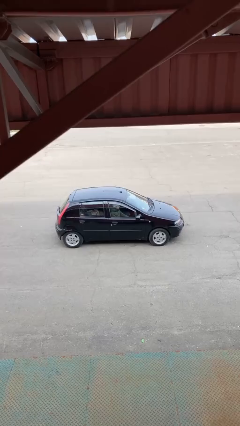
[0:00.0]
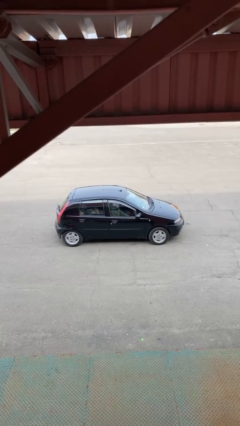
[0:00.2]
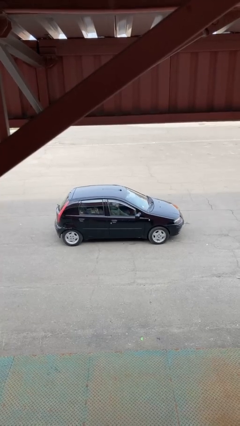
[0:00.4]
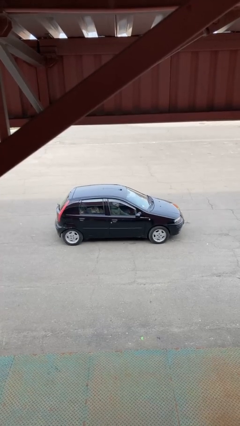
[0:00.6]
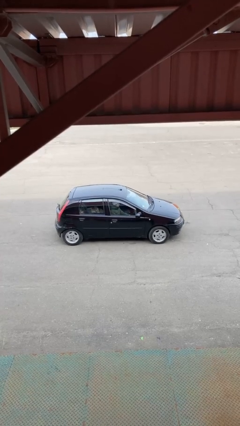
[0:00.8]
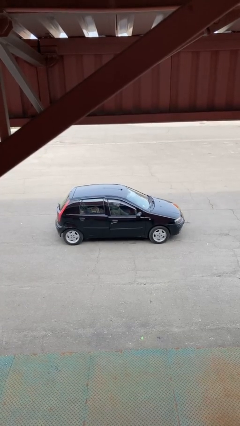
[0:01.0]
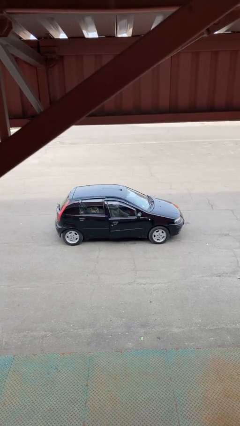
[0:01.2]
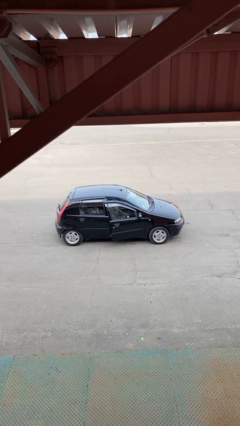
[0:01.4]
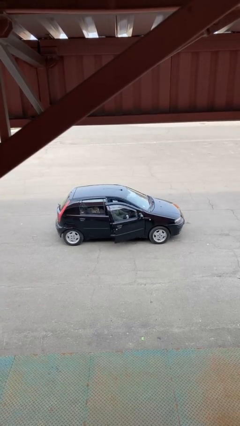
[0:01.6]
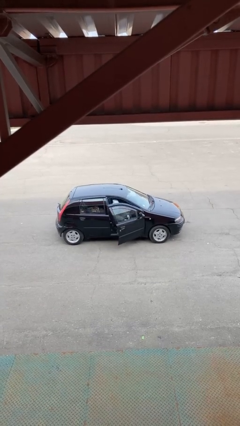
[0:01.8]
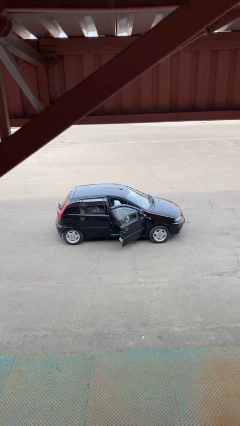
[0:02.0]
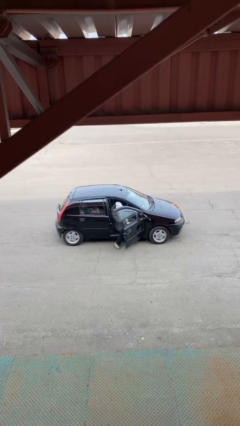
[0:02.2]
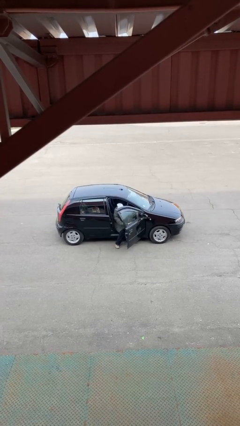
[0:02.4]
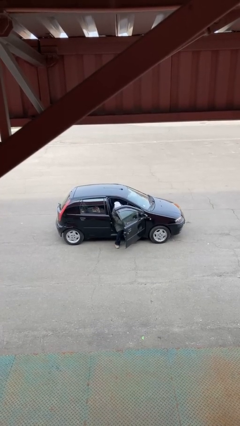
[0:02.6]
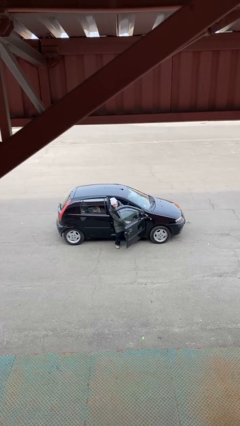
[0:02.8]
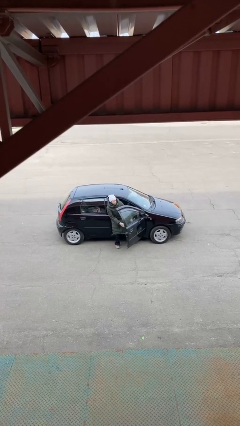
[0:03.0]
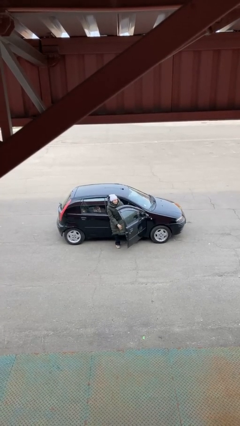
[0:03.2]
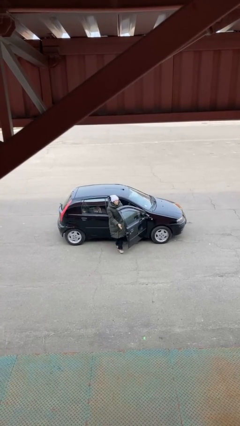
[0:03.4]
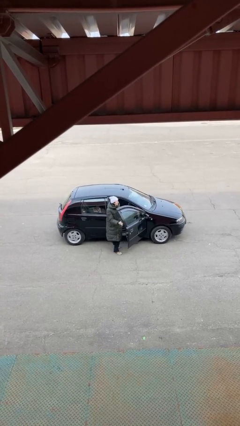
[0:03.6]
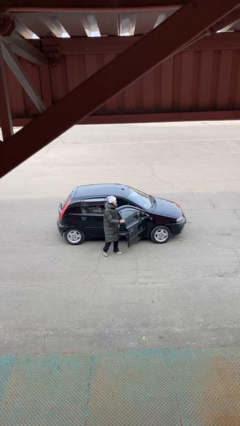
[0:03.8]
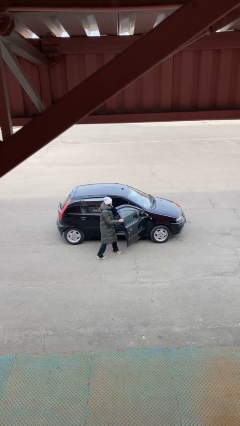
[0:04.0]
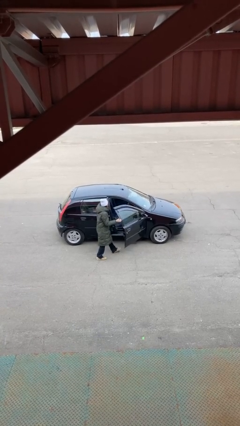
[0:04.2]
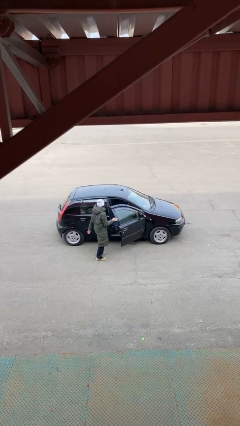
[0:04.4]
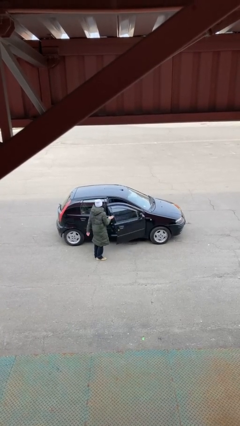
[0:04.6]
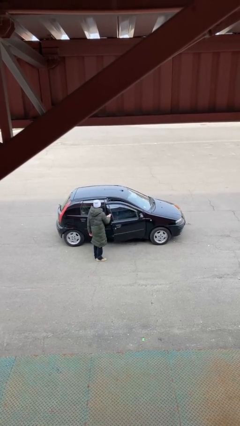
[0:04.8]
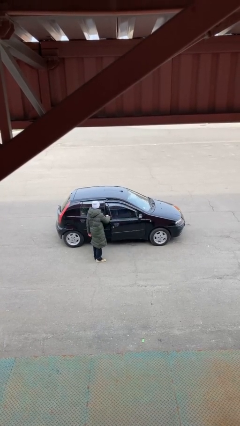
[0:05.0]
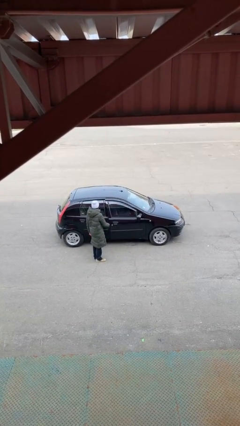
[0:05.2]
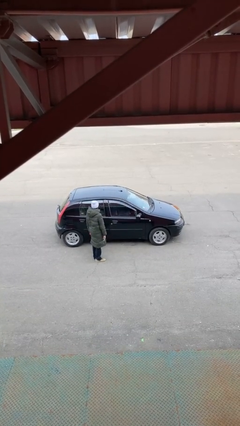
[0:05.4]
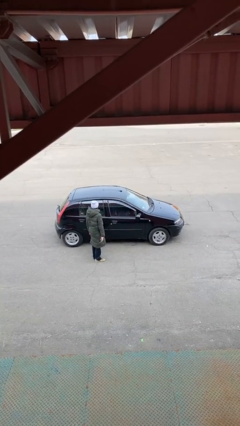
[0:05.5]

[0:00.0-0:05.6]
car drops off person

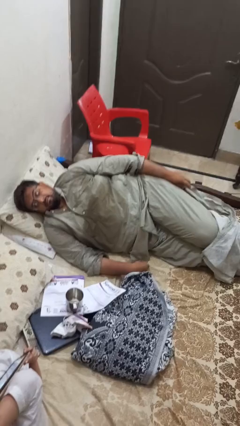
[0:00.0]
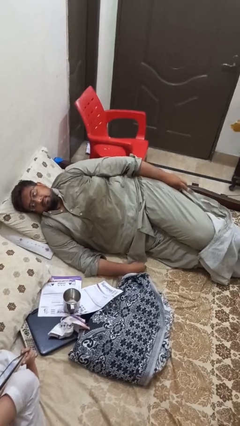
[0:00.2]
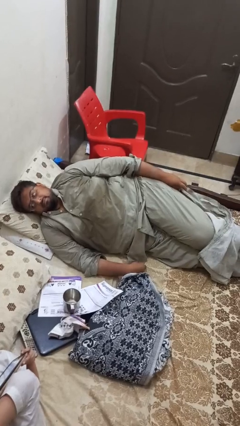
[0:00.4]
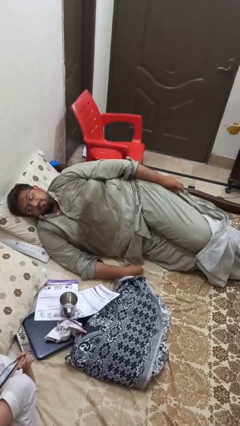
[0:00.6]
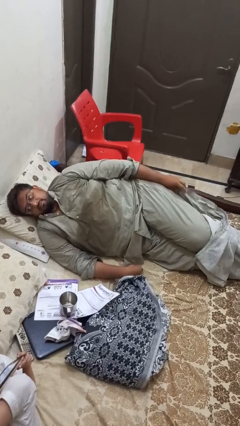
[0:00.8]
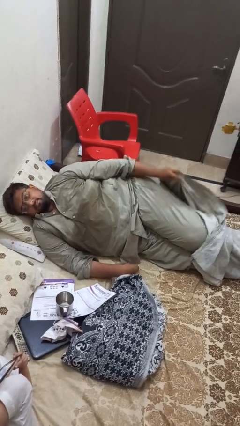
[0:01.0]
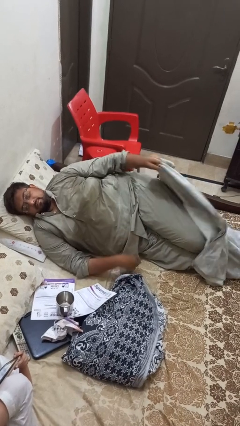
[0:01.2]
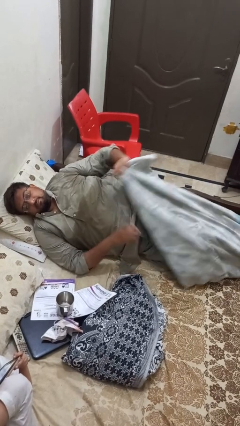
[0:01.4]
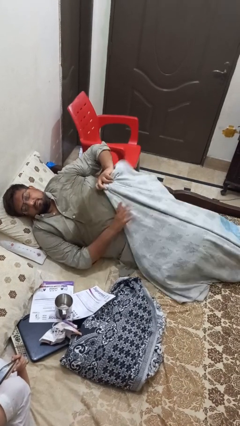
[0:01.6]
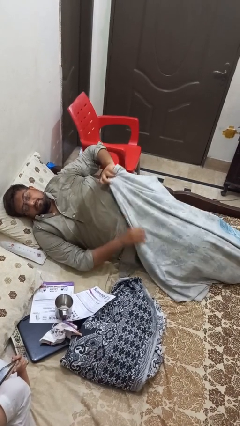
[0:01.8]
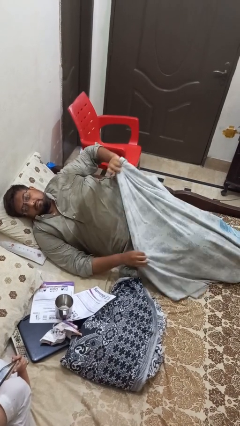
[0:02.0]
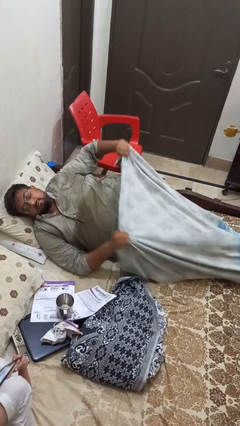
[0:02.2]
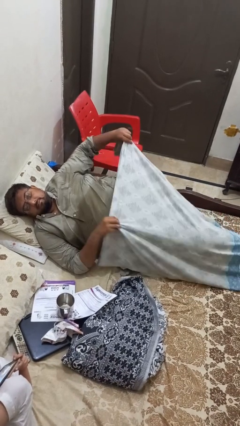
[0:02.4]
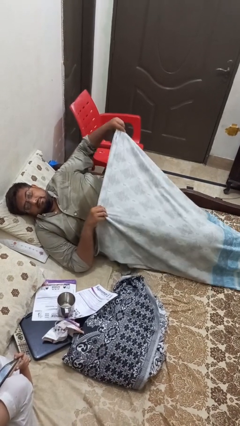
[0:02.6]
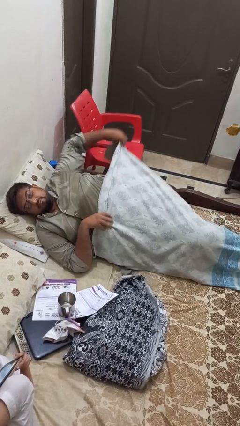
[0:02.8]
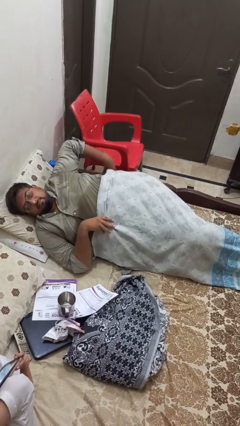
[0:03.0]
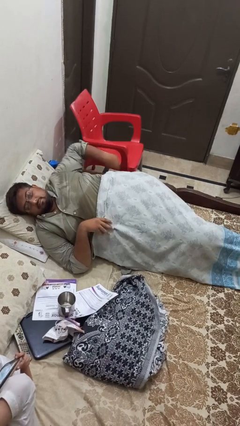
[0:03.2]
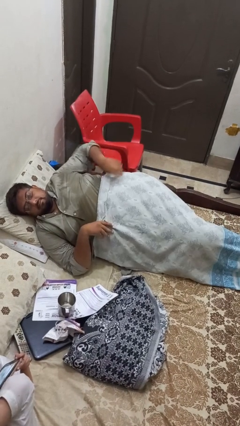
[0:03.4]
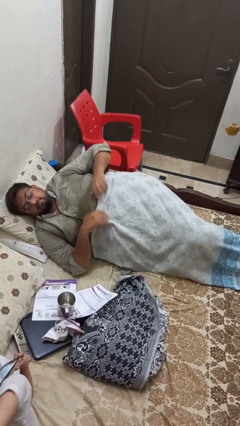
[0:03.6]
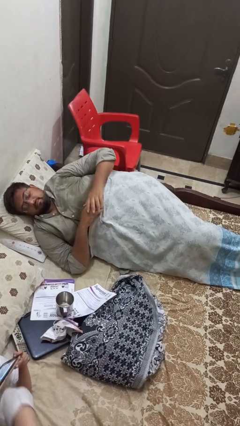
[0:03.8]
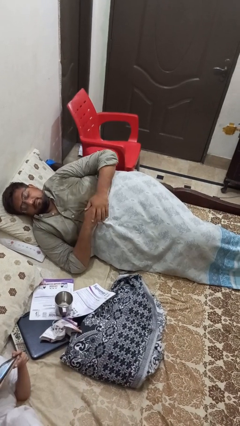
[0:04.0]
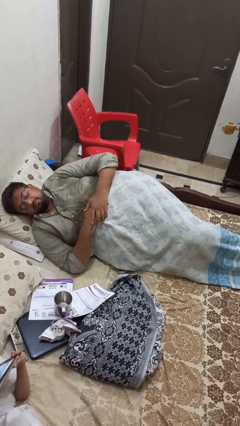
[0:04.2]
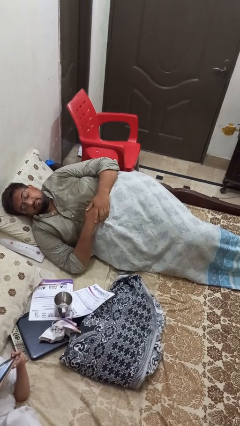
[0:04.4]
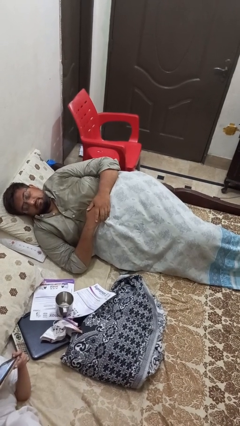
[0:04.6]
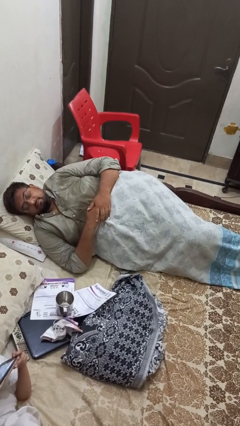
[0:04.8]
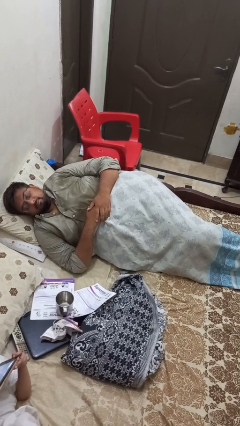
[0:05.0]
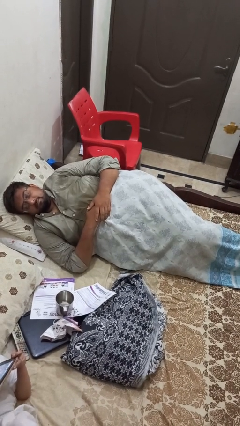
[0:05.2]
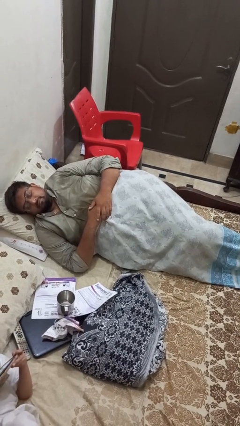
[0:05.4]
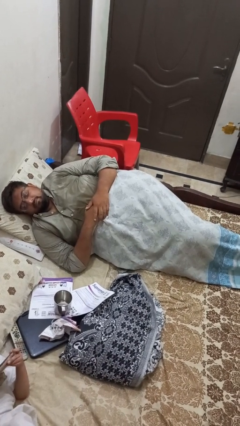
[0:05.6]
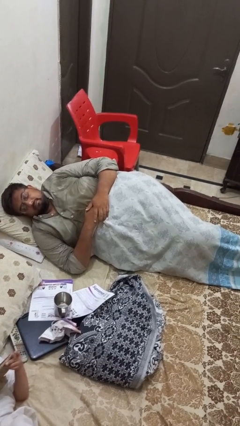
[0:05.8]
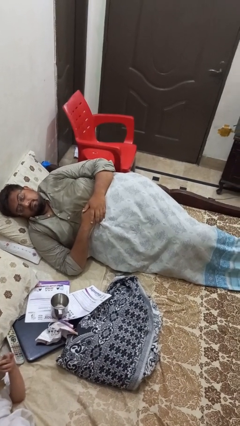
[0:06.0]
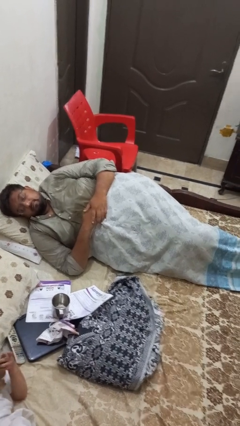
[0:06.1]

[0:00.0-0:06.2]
person covers with bedsheets

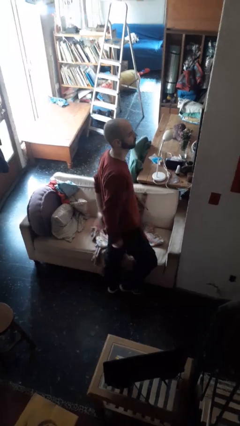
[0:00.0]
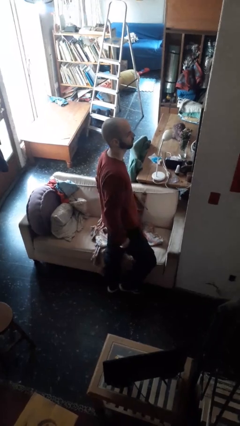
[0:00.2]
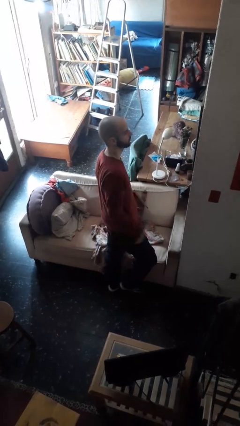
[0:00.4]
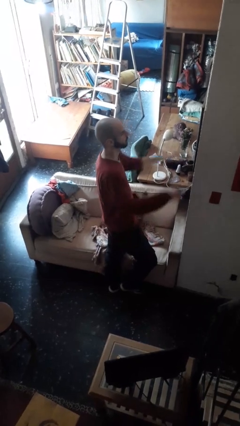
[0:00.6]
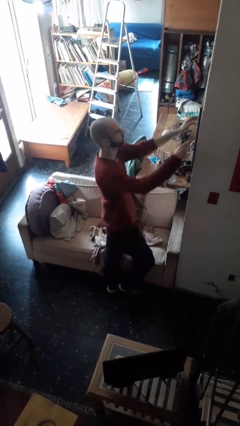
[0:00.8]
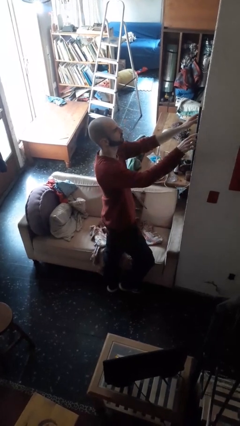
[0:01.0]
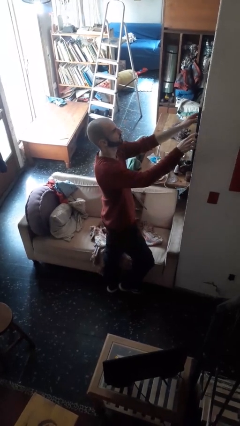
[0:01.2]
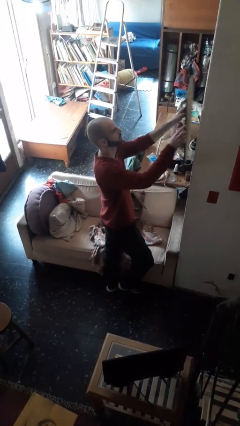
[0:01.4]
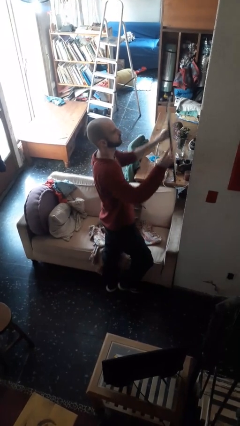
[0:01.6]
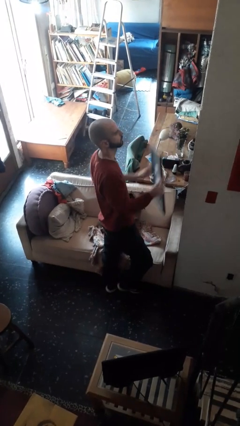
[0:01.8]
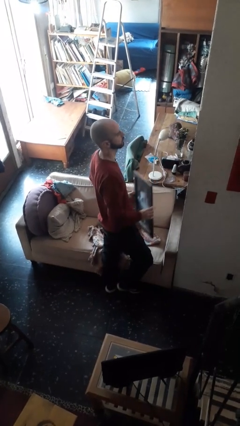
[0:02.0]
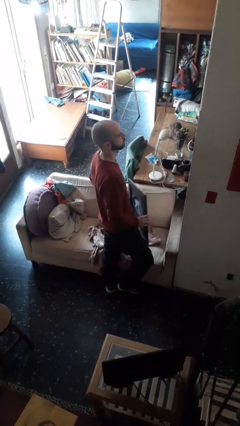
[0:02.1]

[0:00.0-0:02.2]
person takes down picture frame

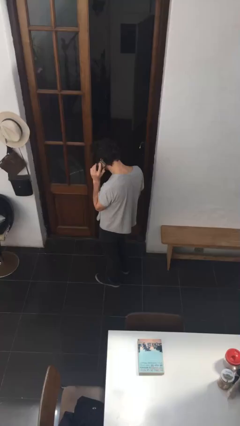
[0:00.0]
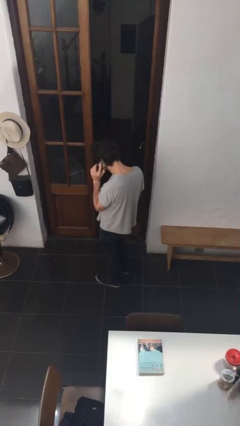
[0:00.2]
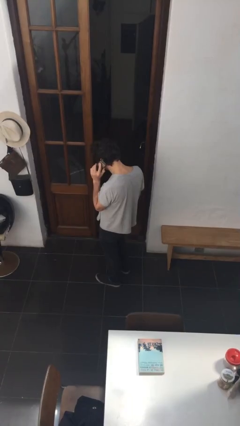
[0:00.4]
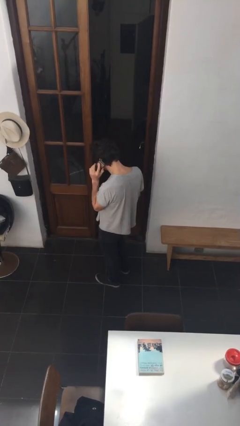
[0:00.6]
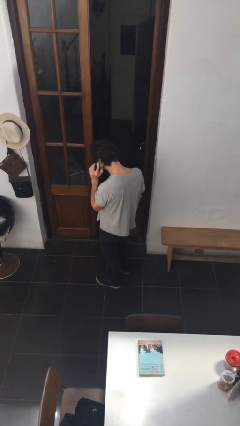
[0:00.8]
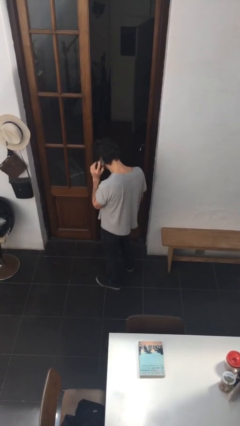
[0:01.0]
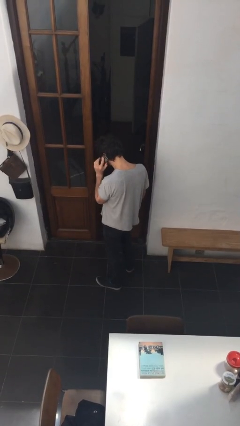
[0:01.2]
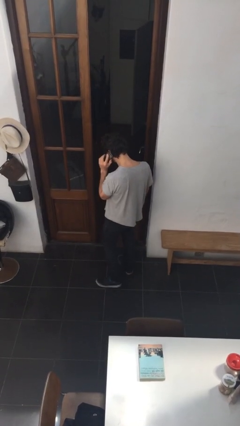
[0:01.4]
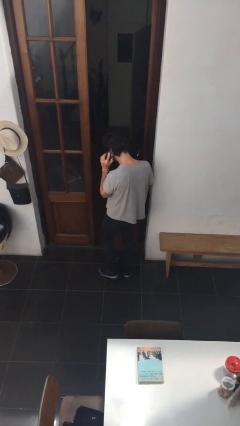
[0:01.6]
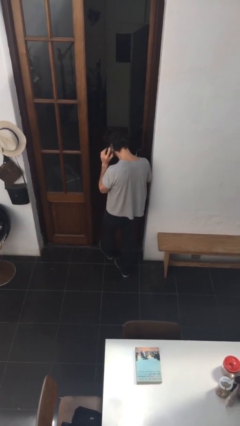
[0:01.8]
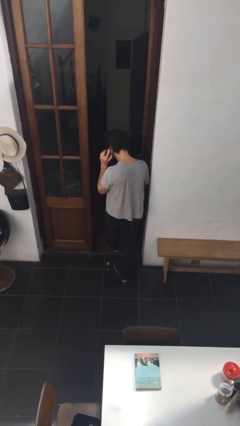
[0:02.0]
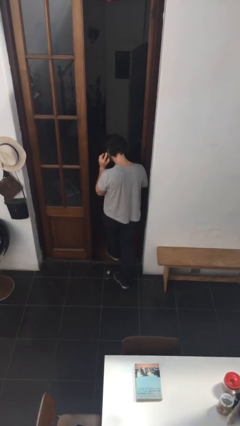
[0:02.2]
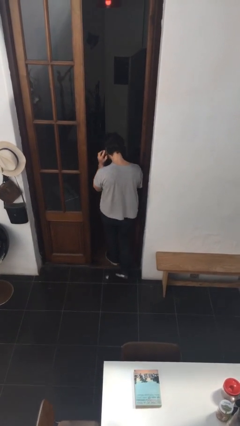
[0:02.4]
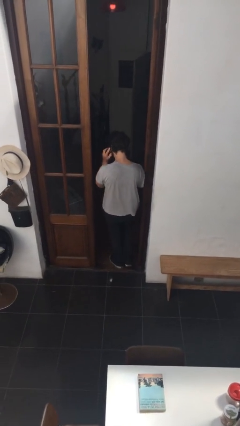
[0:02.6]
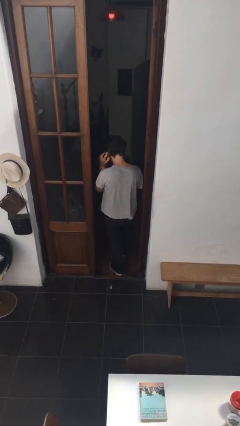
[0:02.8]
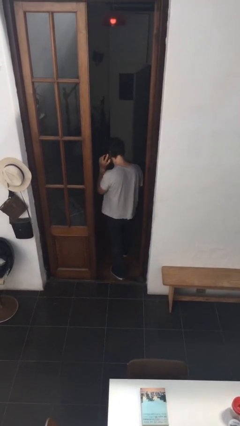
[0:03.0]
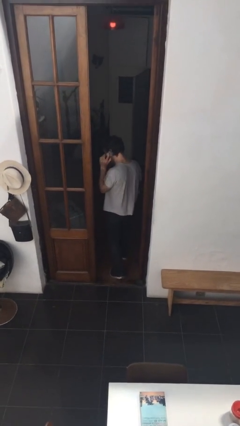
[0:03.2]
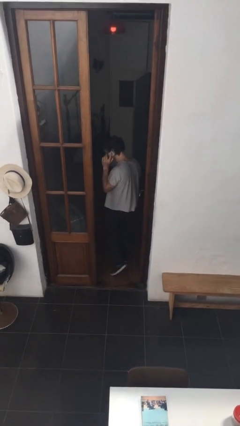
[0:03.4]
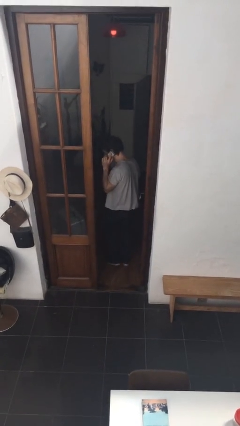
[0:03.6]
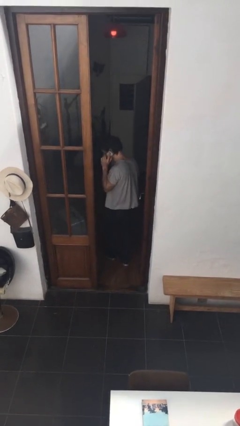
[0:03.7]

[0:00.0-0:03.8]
person exits scene through structure

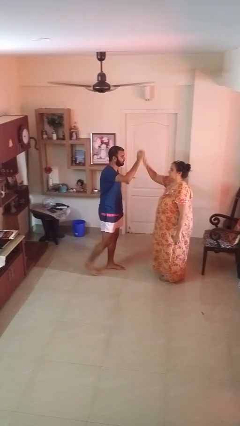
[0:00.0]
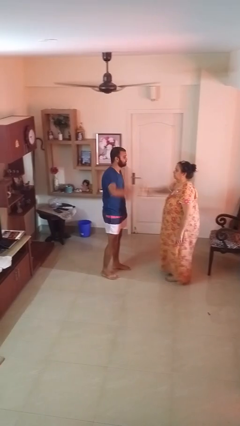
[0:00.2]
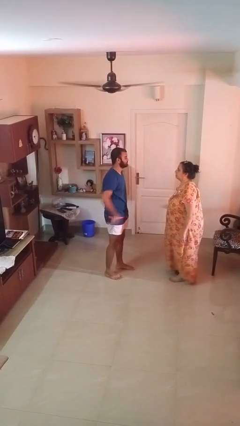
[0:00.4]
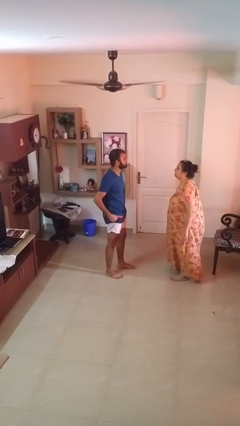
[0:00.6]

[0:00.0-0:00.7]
person highfives hand
